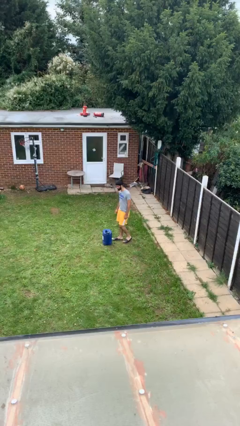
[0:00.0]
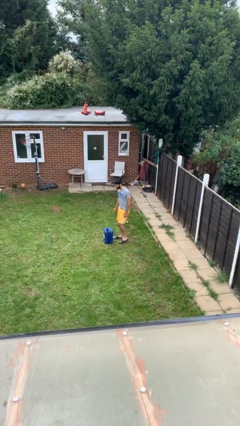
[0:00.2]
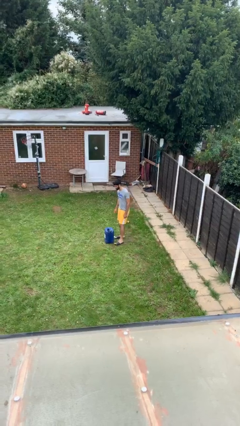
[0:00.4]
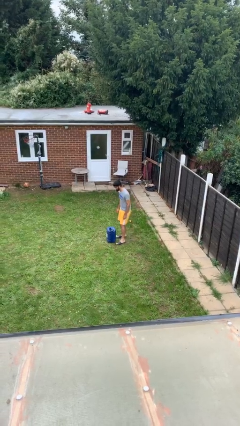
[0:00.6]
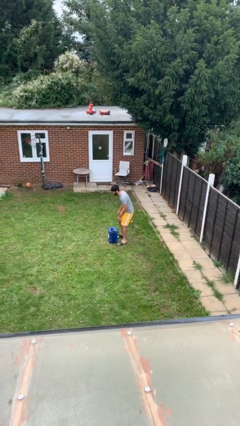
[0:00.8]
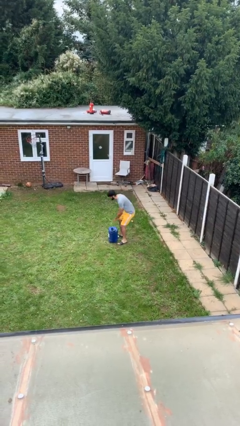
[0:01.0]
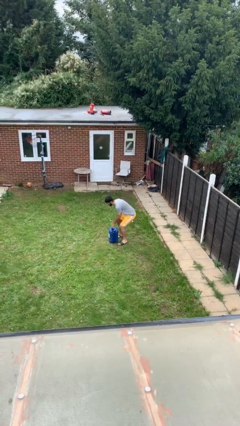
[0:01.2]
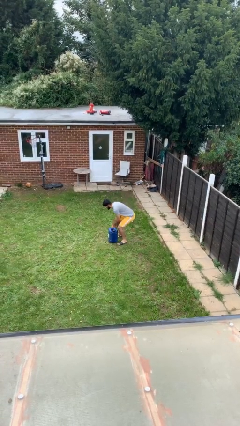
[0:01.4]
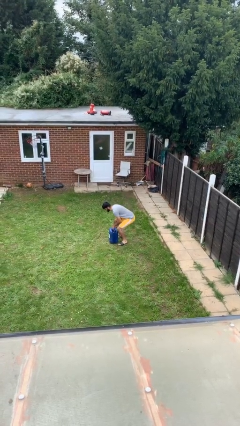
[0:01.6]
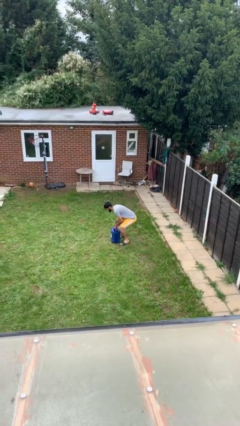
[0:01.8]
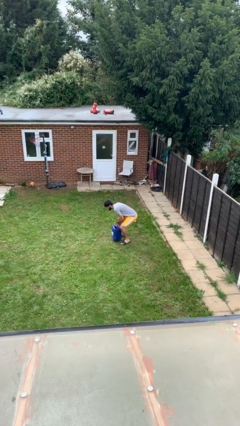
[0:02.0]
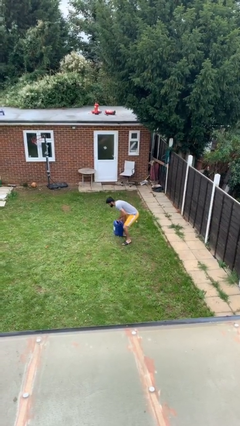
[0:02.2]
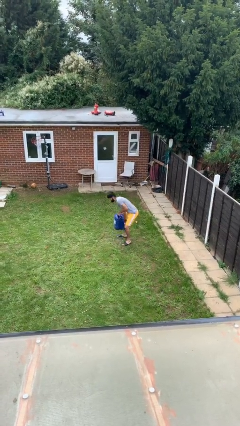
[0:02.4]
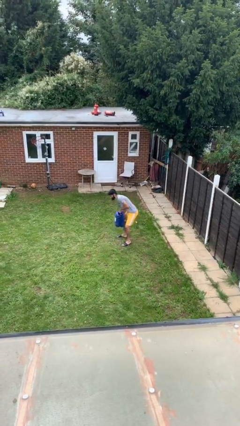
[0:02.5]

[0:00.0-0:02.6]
person picks up object from floor

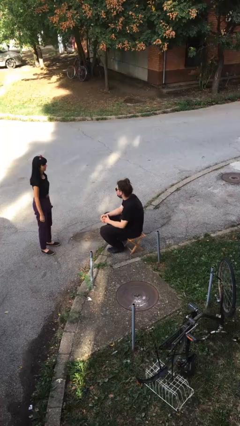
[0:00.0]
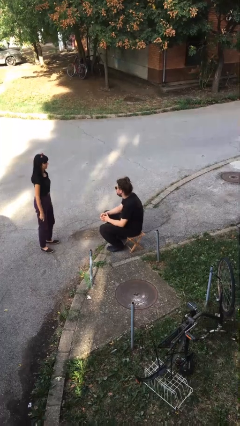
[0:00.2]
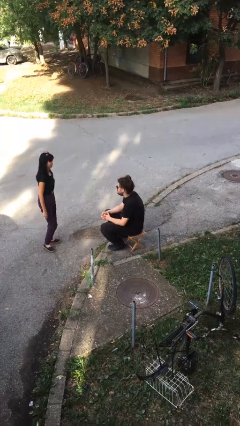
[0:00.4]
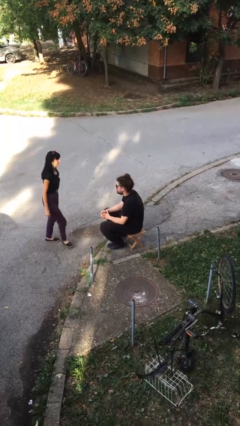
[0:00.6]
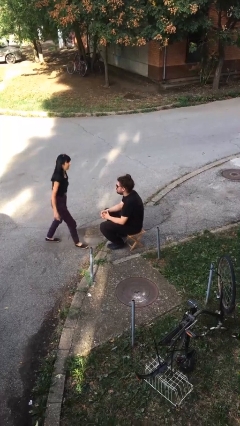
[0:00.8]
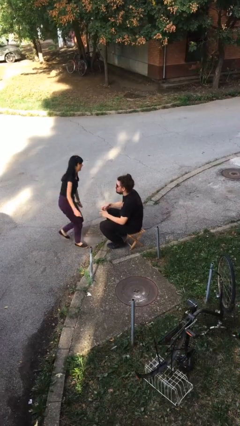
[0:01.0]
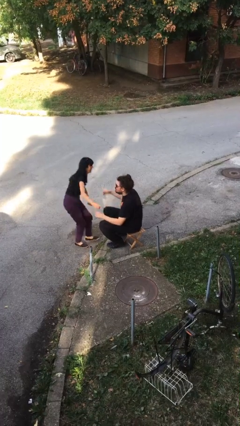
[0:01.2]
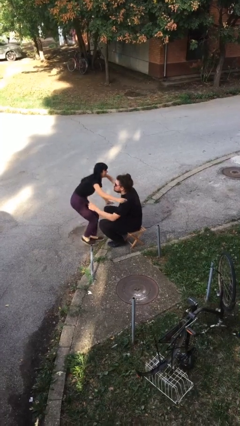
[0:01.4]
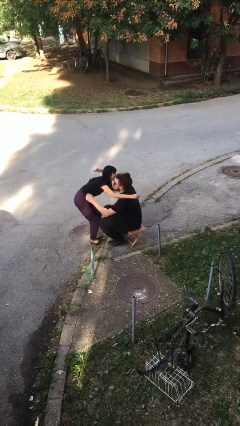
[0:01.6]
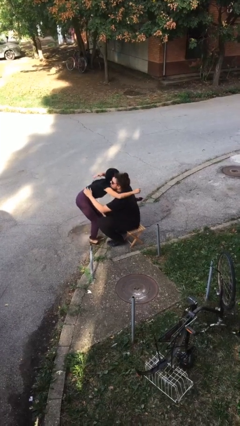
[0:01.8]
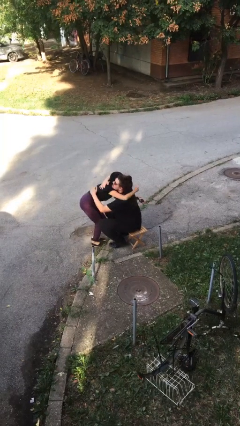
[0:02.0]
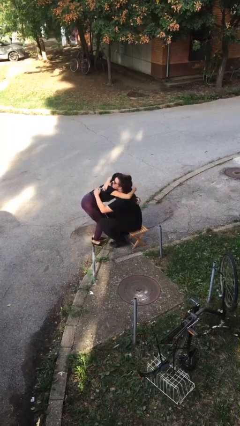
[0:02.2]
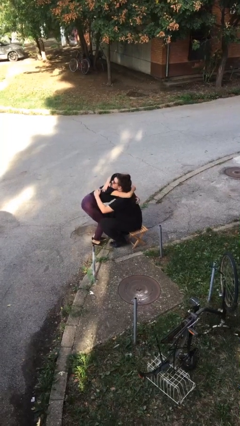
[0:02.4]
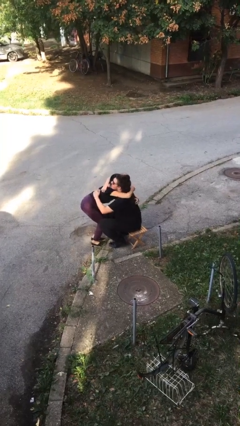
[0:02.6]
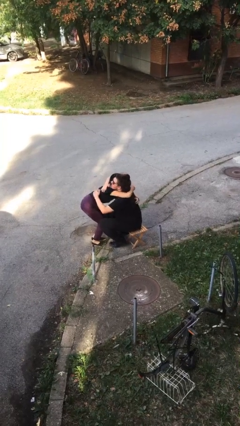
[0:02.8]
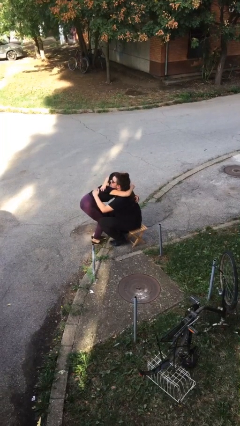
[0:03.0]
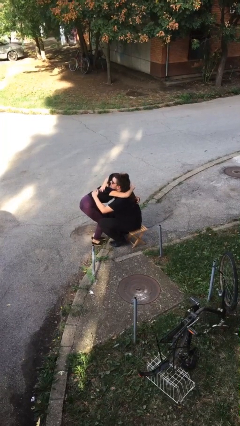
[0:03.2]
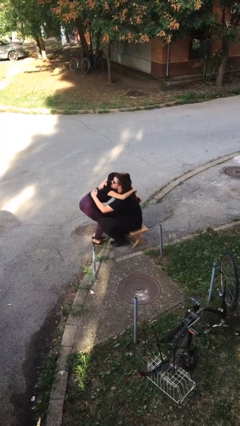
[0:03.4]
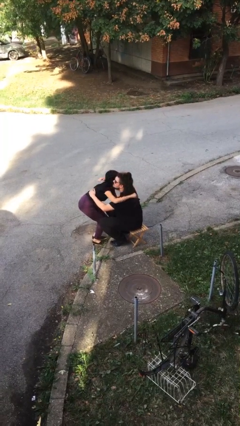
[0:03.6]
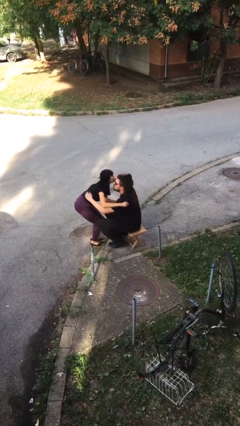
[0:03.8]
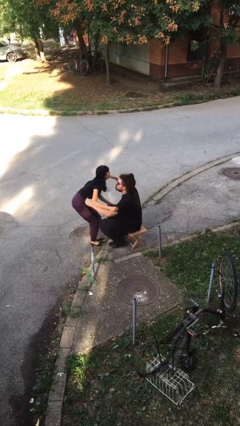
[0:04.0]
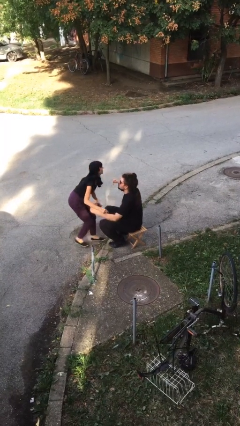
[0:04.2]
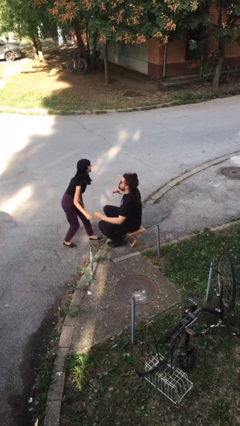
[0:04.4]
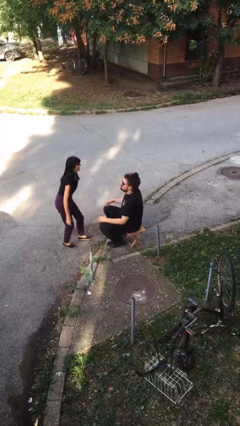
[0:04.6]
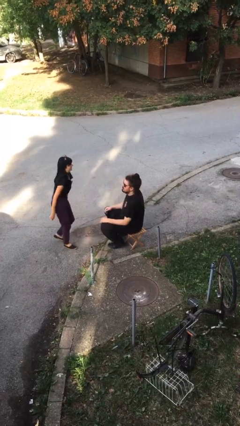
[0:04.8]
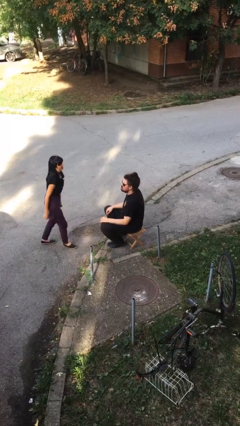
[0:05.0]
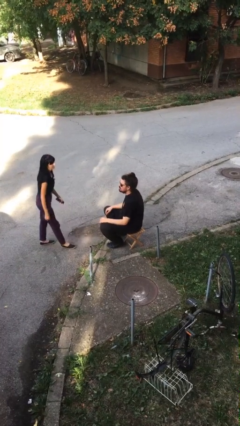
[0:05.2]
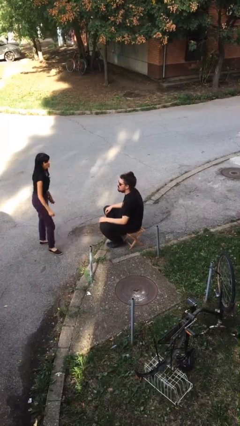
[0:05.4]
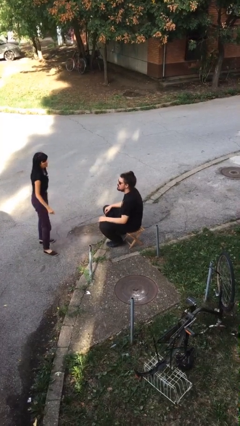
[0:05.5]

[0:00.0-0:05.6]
person embraces person

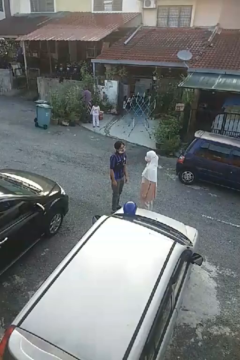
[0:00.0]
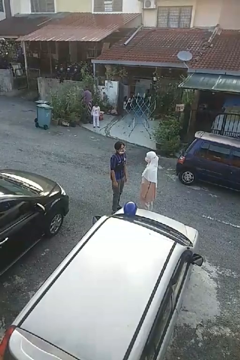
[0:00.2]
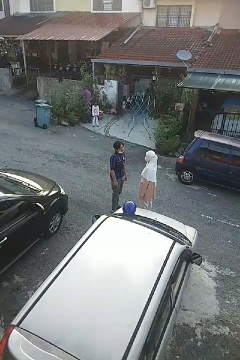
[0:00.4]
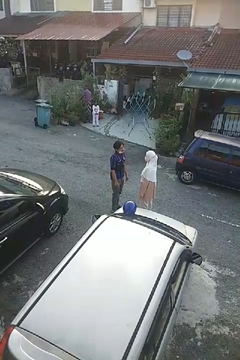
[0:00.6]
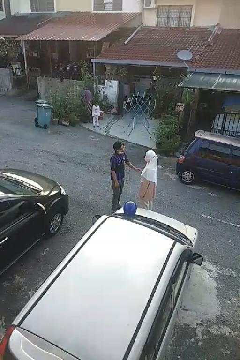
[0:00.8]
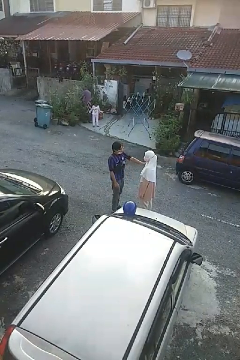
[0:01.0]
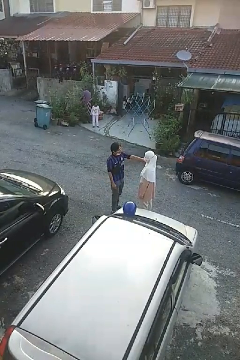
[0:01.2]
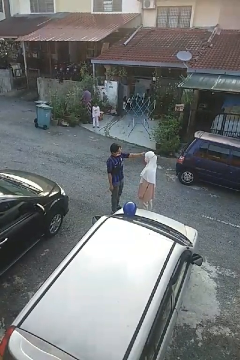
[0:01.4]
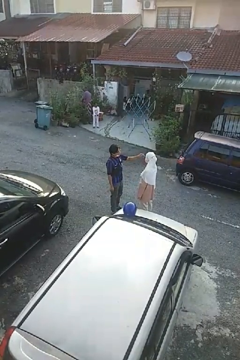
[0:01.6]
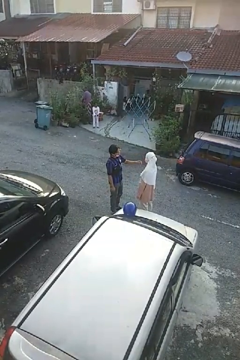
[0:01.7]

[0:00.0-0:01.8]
person shoves person

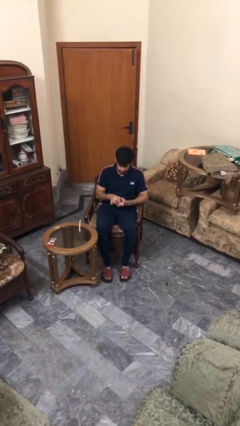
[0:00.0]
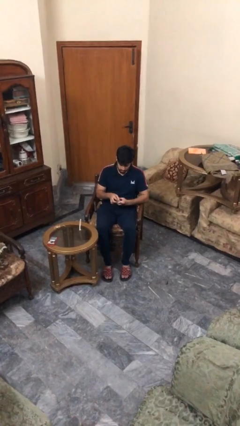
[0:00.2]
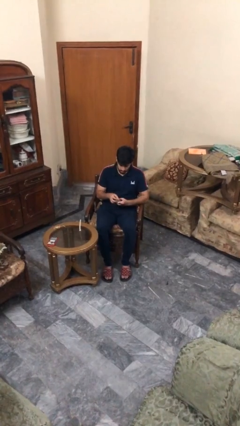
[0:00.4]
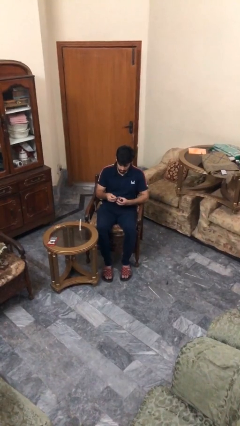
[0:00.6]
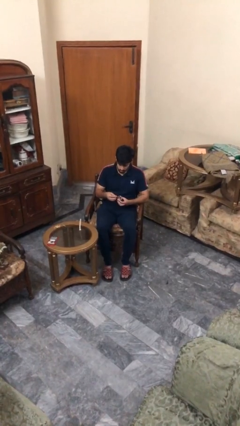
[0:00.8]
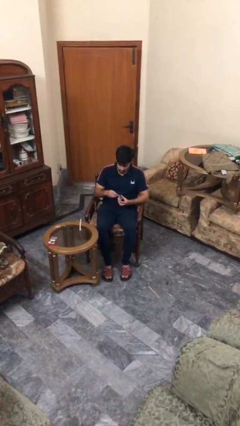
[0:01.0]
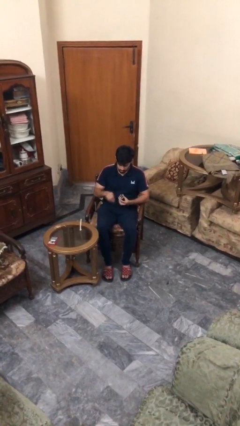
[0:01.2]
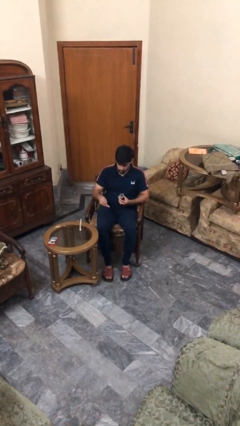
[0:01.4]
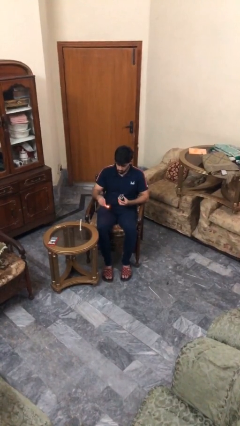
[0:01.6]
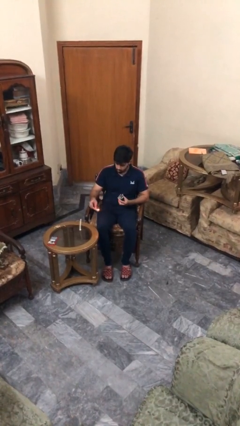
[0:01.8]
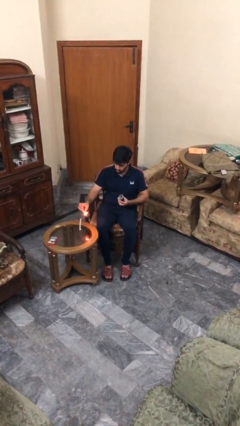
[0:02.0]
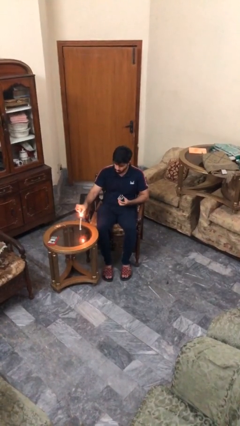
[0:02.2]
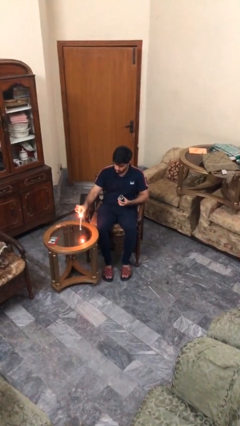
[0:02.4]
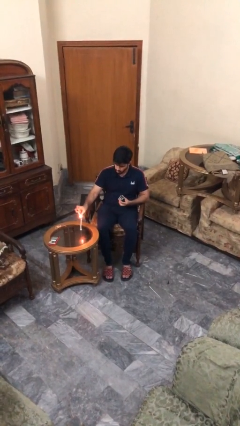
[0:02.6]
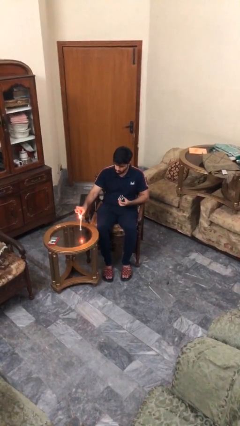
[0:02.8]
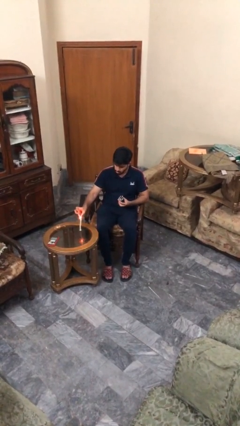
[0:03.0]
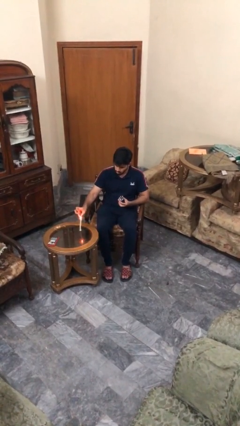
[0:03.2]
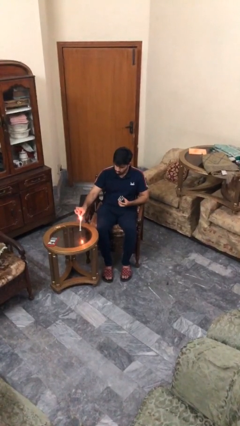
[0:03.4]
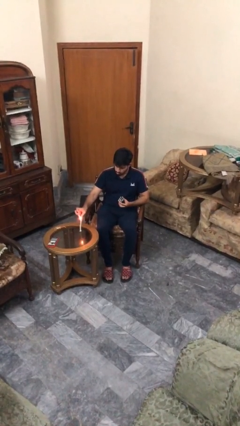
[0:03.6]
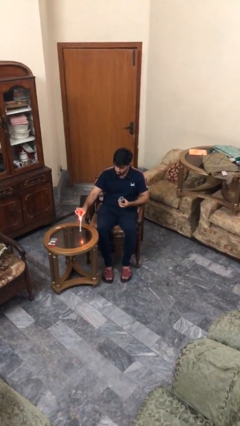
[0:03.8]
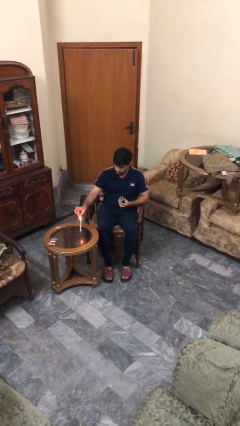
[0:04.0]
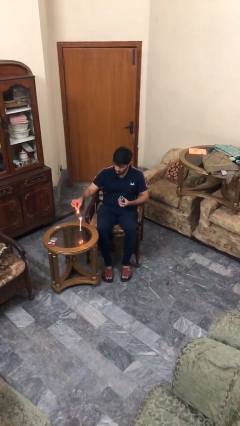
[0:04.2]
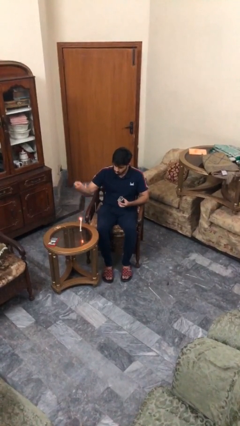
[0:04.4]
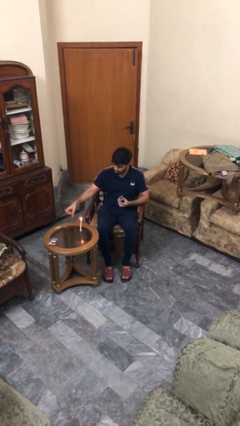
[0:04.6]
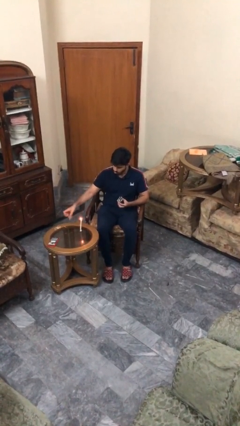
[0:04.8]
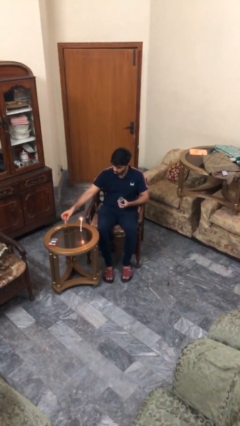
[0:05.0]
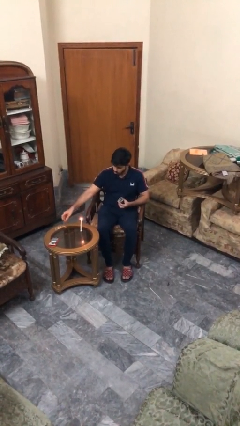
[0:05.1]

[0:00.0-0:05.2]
person lights candle

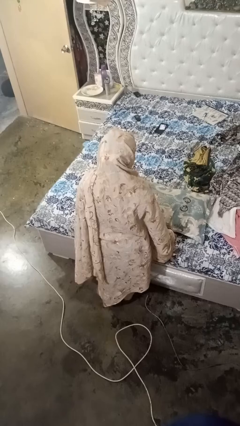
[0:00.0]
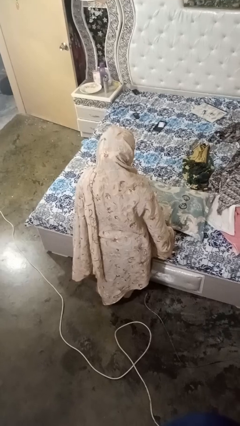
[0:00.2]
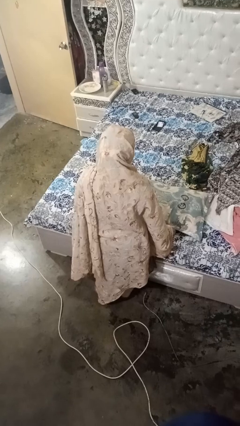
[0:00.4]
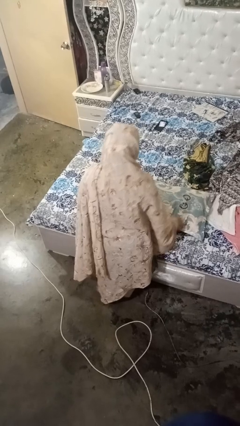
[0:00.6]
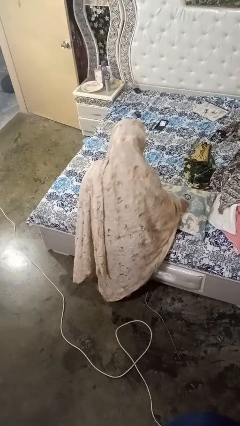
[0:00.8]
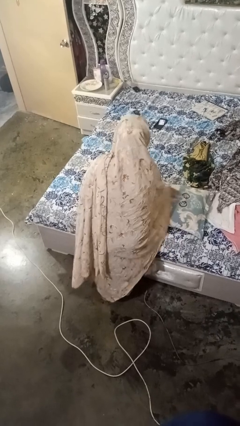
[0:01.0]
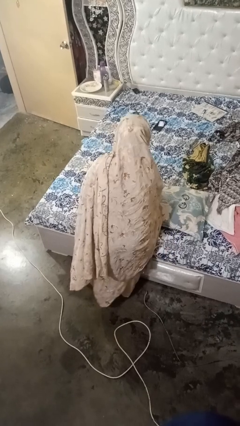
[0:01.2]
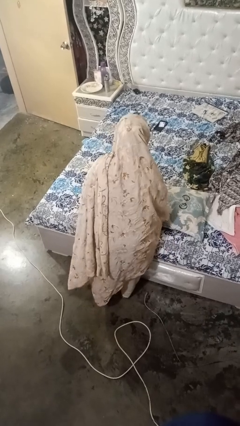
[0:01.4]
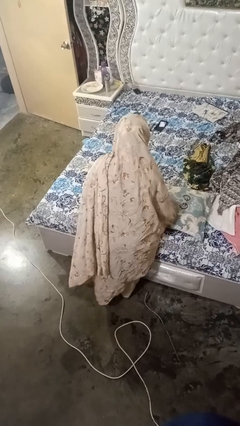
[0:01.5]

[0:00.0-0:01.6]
person waves hand over object

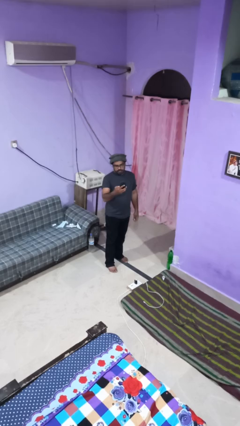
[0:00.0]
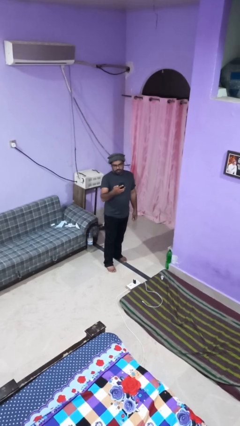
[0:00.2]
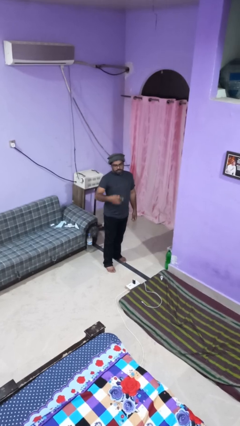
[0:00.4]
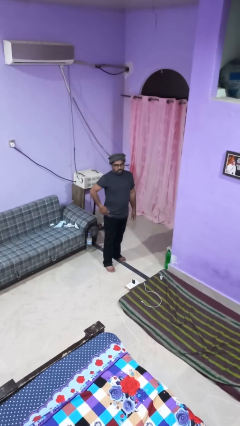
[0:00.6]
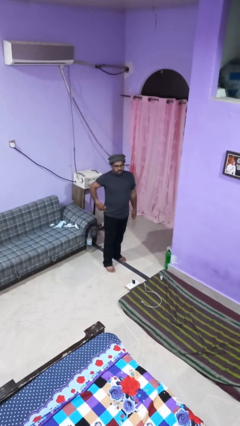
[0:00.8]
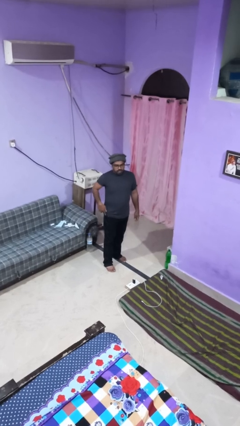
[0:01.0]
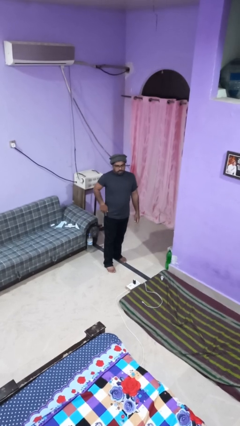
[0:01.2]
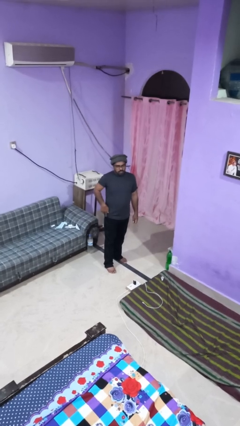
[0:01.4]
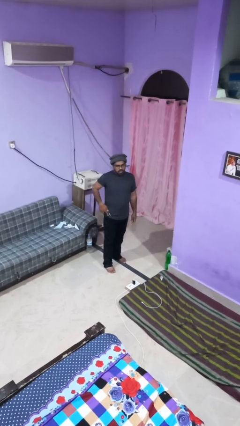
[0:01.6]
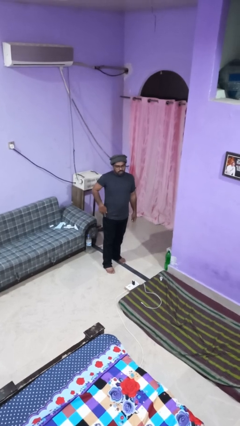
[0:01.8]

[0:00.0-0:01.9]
person puts phone into pocket
